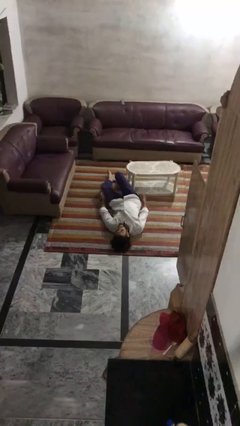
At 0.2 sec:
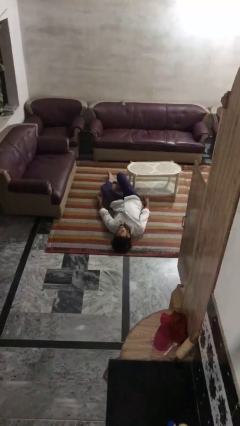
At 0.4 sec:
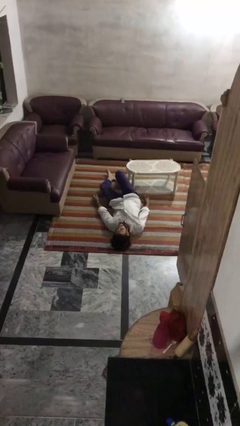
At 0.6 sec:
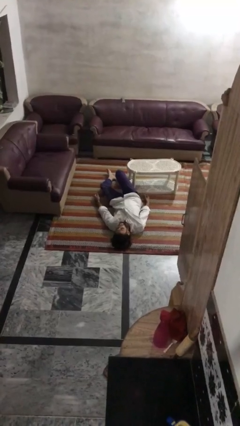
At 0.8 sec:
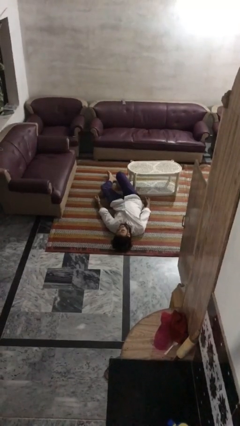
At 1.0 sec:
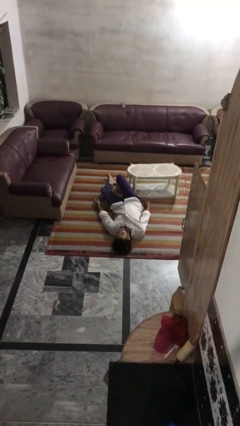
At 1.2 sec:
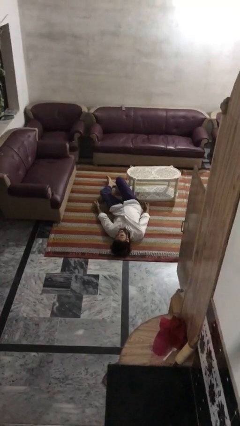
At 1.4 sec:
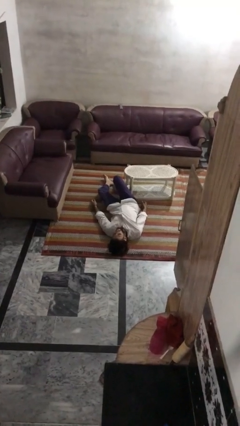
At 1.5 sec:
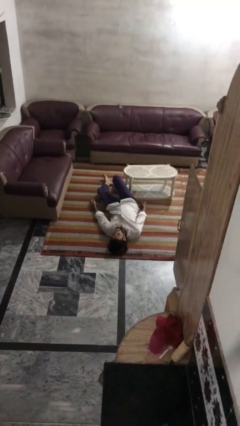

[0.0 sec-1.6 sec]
person lies down on floor

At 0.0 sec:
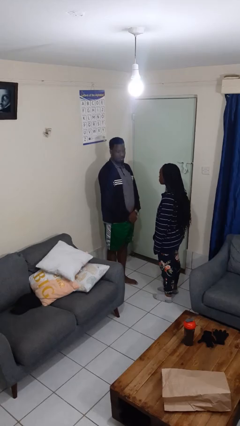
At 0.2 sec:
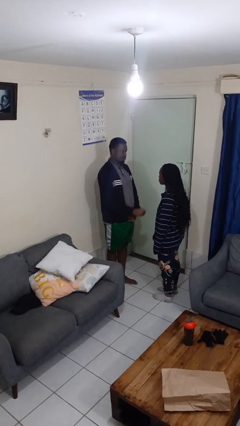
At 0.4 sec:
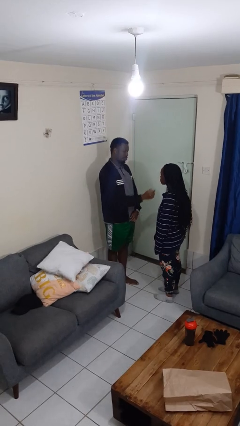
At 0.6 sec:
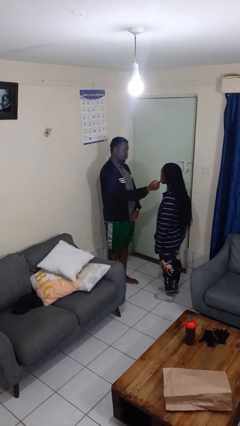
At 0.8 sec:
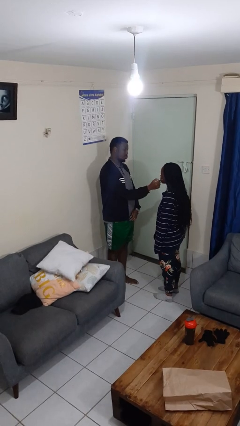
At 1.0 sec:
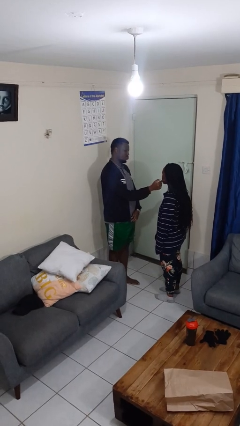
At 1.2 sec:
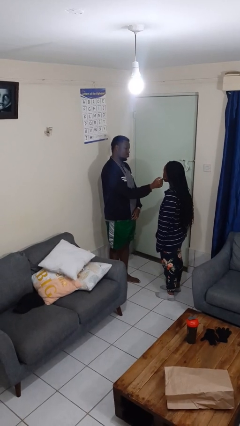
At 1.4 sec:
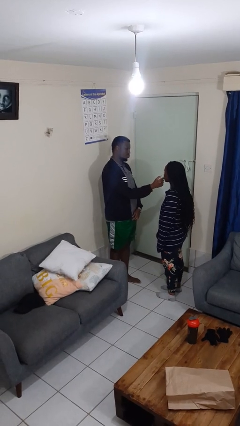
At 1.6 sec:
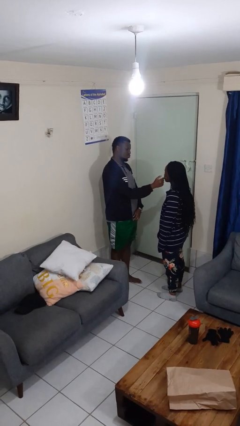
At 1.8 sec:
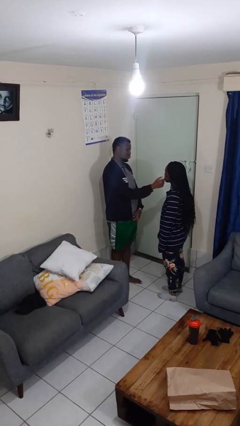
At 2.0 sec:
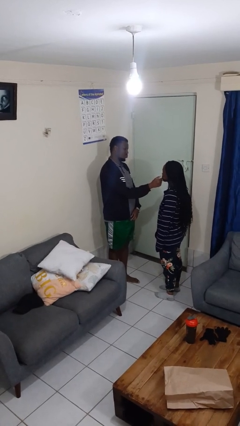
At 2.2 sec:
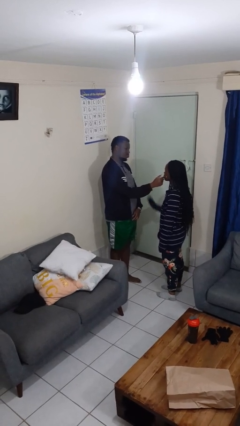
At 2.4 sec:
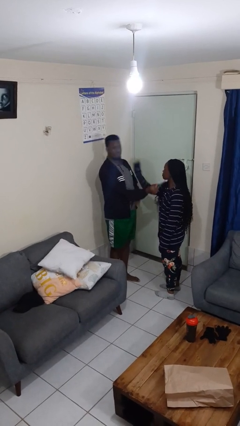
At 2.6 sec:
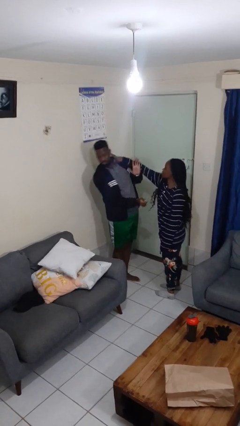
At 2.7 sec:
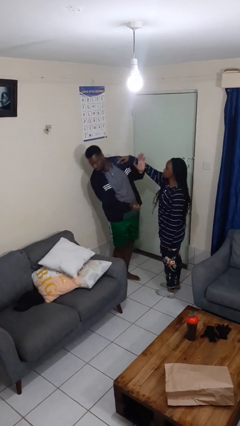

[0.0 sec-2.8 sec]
person touches face of person

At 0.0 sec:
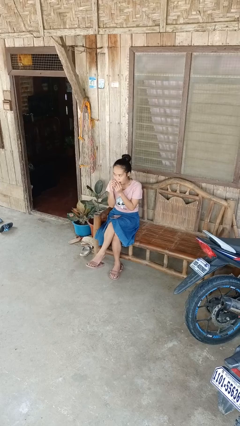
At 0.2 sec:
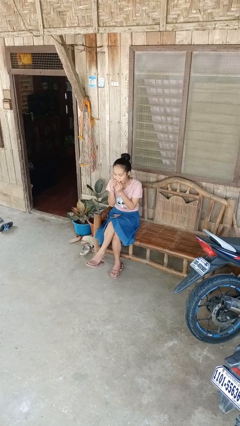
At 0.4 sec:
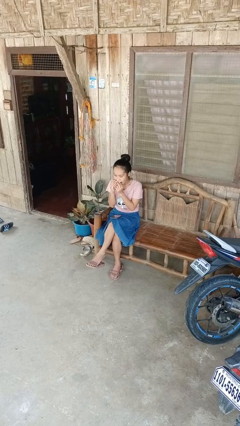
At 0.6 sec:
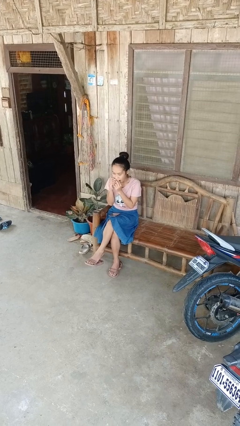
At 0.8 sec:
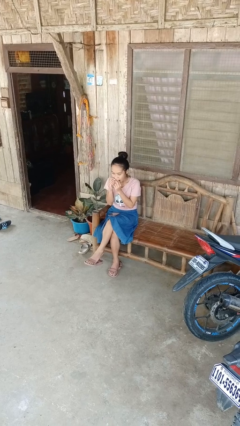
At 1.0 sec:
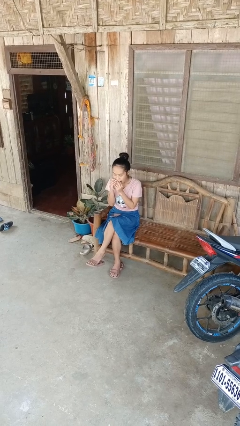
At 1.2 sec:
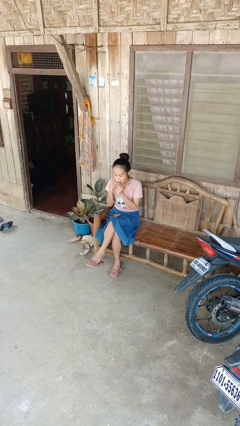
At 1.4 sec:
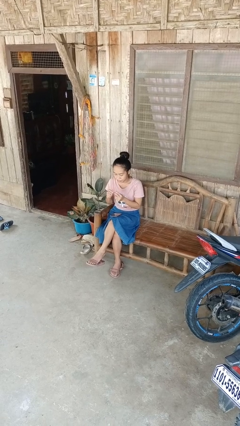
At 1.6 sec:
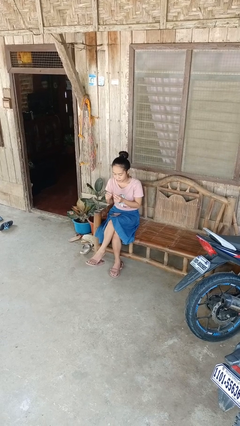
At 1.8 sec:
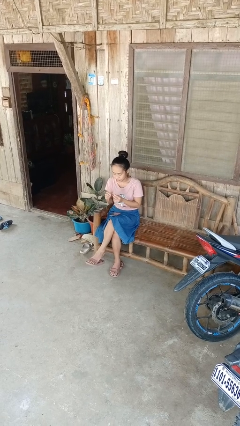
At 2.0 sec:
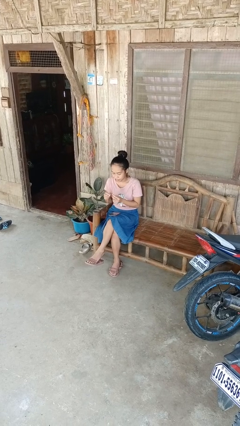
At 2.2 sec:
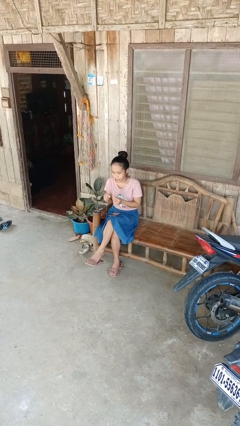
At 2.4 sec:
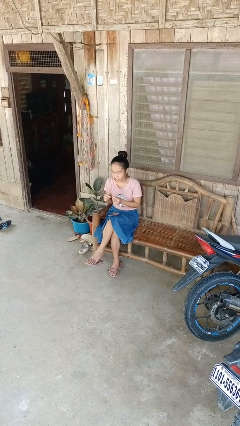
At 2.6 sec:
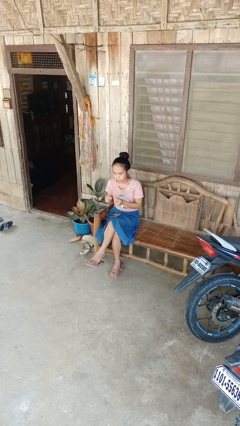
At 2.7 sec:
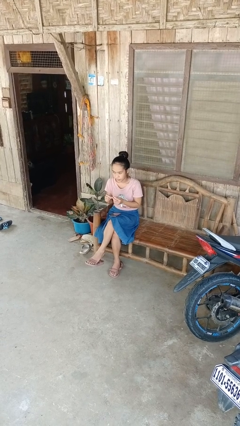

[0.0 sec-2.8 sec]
person flosses

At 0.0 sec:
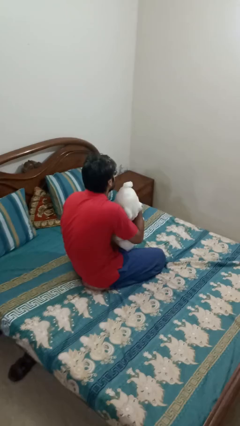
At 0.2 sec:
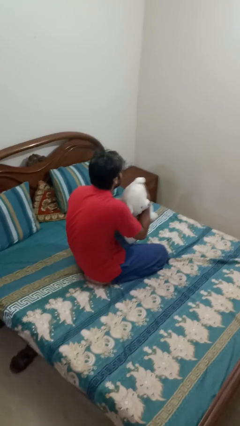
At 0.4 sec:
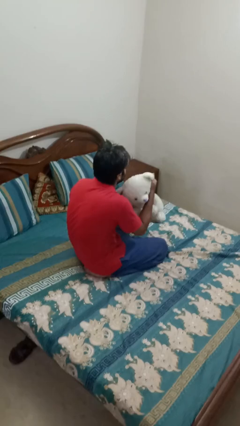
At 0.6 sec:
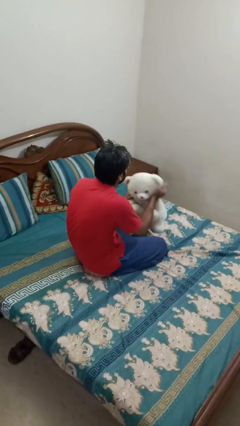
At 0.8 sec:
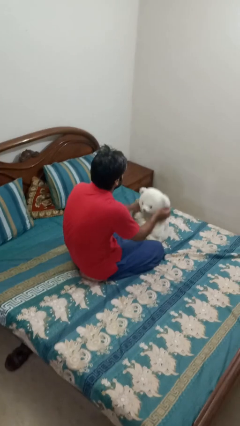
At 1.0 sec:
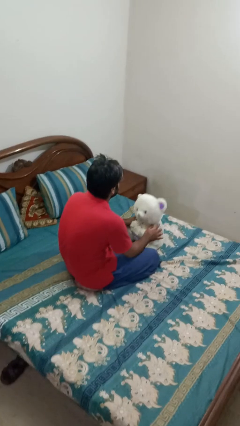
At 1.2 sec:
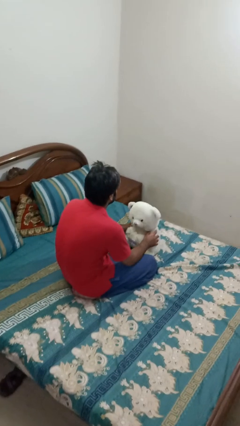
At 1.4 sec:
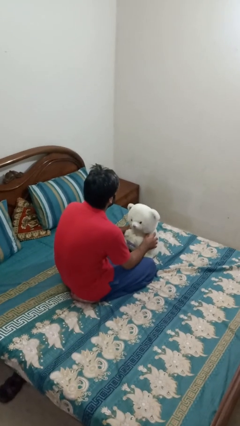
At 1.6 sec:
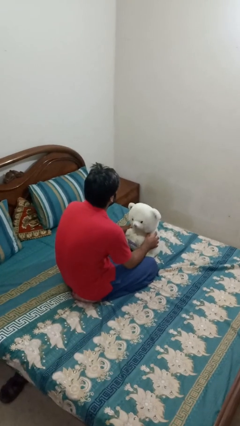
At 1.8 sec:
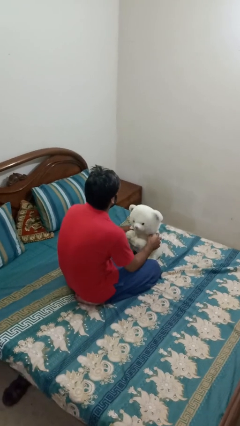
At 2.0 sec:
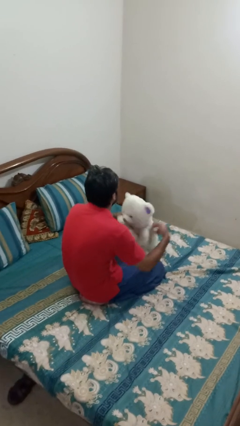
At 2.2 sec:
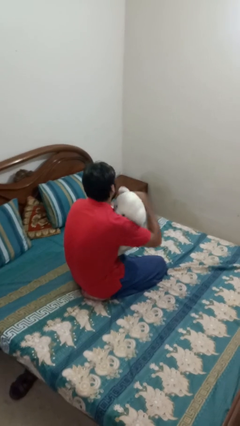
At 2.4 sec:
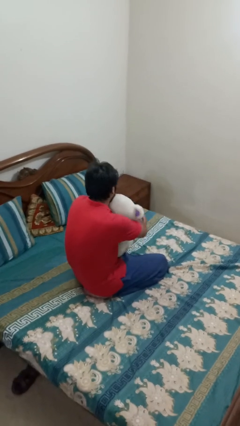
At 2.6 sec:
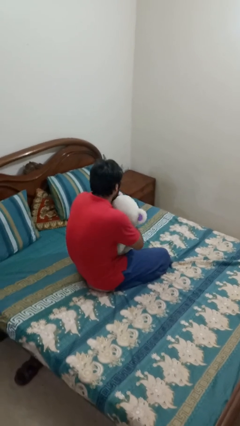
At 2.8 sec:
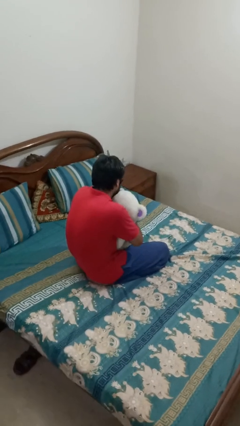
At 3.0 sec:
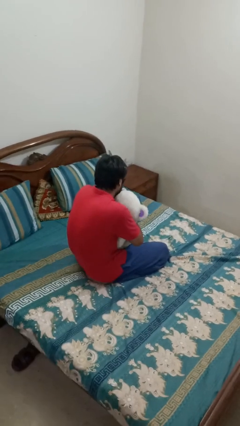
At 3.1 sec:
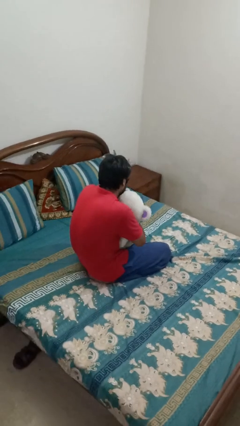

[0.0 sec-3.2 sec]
person hugs stuffed animal

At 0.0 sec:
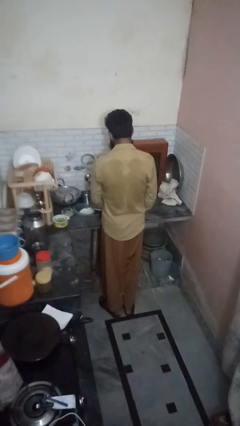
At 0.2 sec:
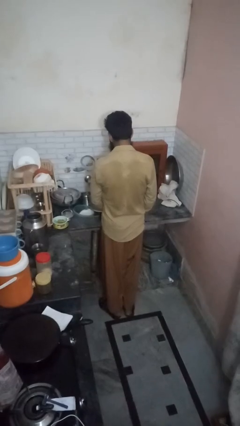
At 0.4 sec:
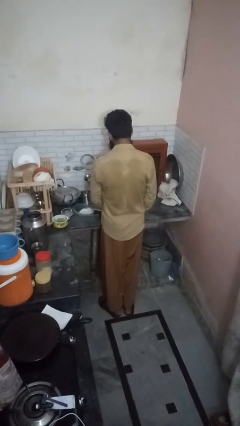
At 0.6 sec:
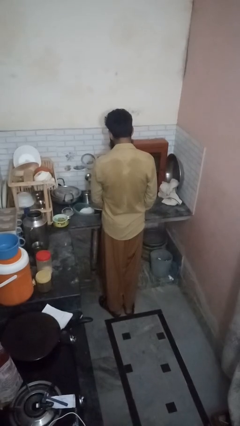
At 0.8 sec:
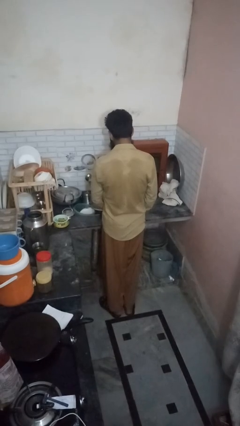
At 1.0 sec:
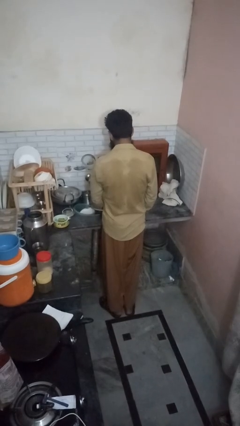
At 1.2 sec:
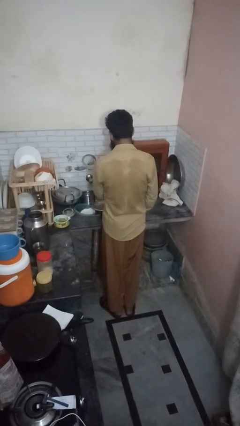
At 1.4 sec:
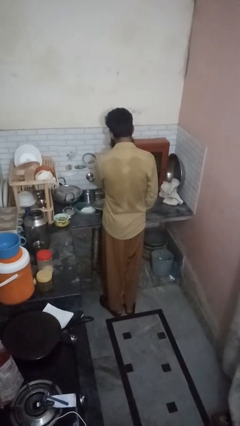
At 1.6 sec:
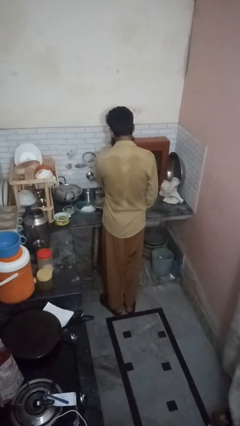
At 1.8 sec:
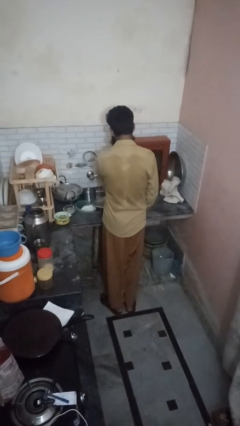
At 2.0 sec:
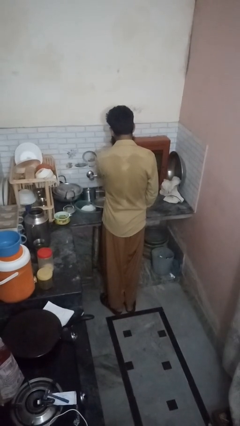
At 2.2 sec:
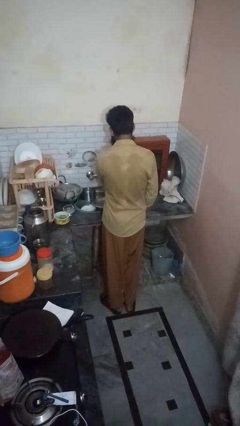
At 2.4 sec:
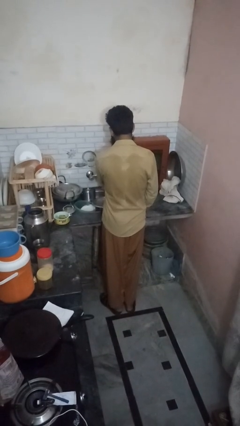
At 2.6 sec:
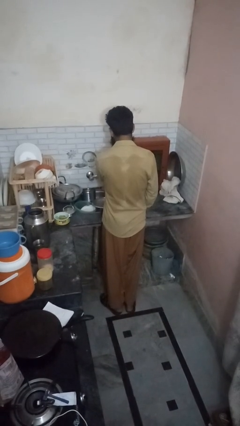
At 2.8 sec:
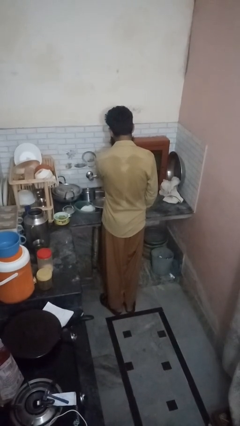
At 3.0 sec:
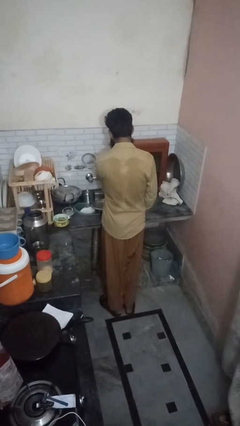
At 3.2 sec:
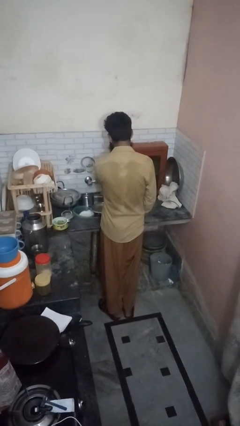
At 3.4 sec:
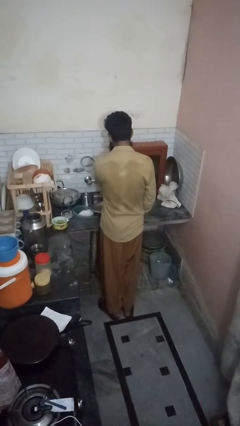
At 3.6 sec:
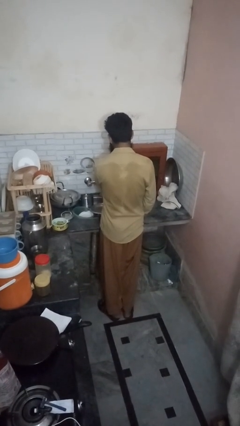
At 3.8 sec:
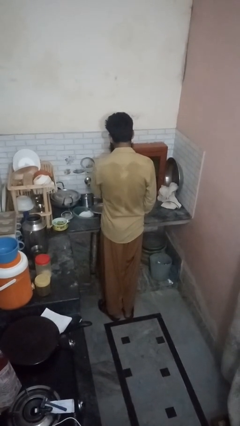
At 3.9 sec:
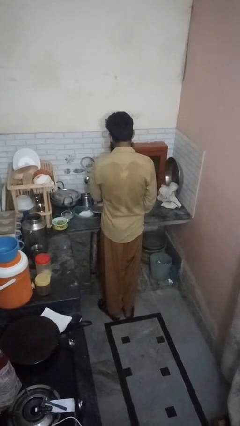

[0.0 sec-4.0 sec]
person closes dishwasher

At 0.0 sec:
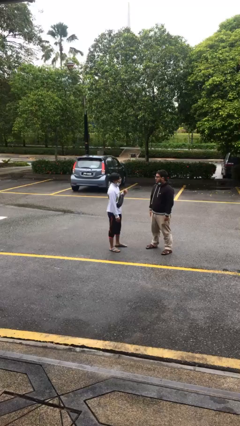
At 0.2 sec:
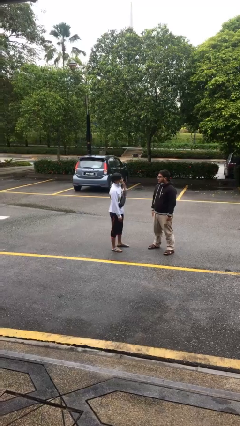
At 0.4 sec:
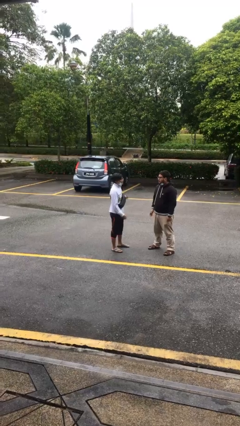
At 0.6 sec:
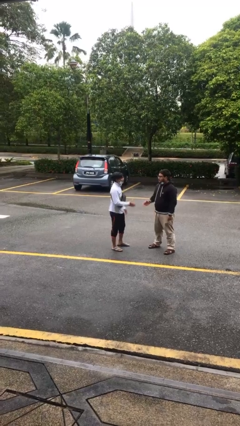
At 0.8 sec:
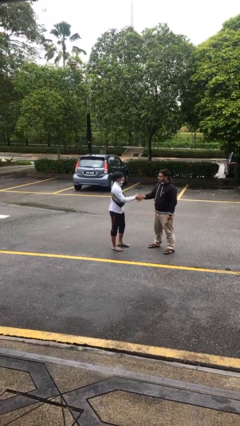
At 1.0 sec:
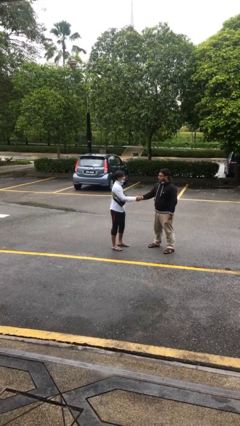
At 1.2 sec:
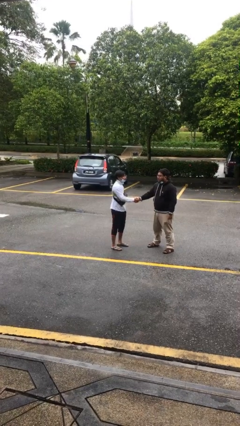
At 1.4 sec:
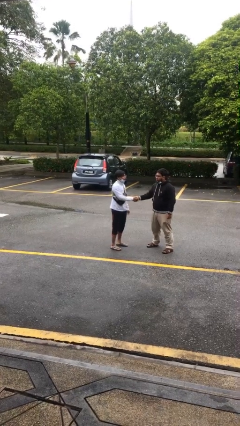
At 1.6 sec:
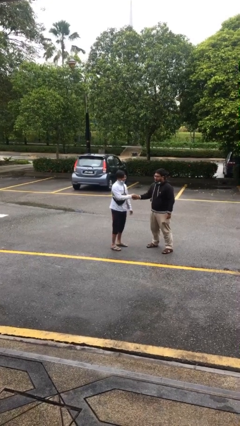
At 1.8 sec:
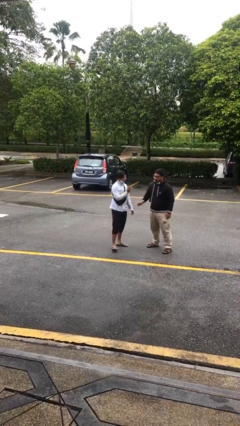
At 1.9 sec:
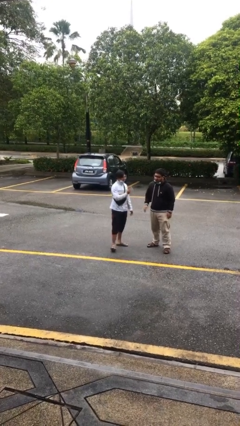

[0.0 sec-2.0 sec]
person shakes hand

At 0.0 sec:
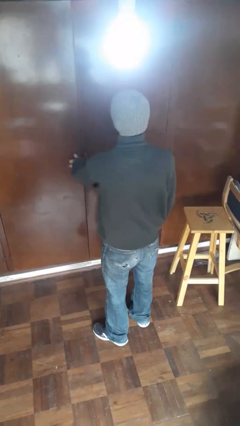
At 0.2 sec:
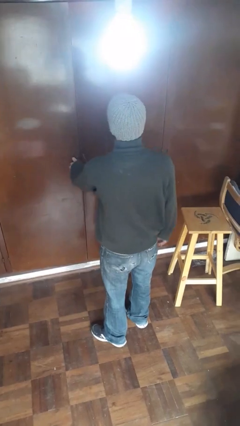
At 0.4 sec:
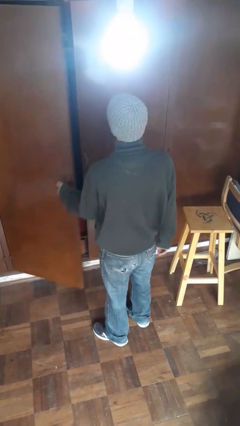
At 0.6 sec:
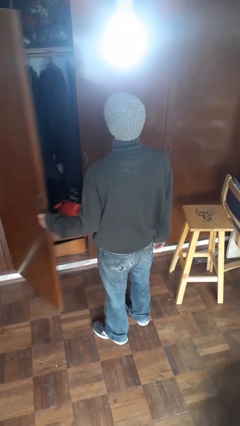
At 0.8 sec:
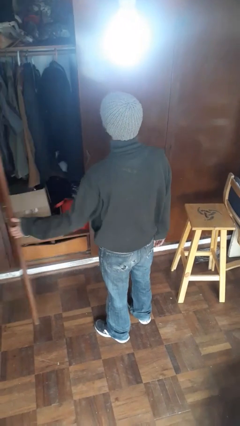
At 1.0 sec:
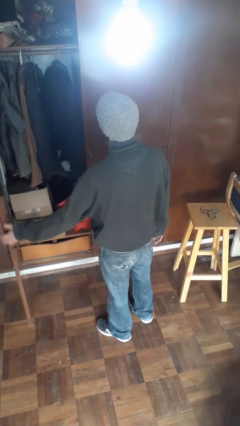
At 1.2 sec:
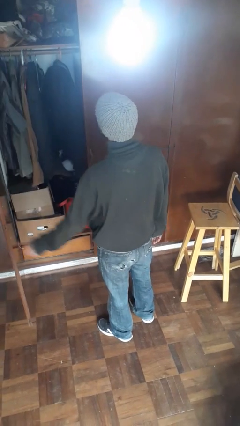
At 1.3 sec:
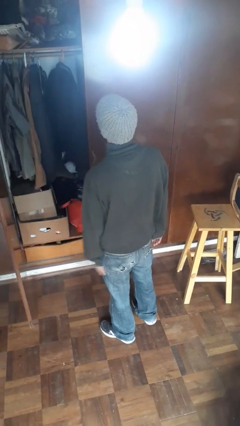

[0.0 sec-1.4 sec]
person opens closet door
